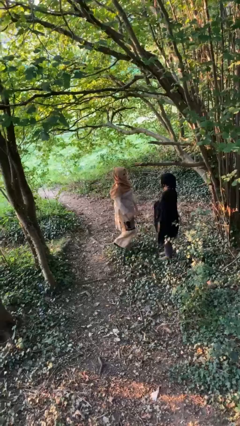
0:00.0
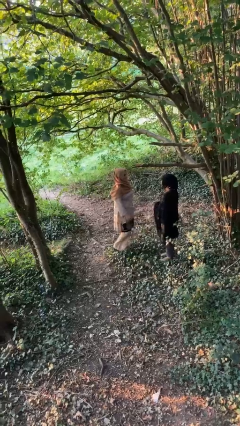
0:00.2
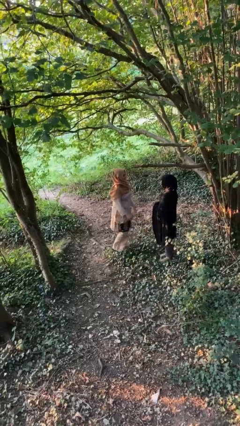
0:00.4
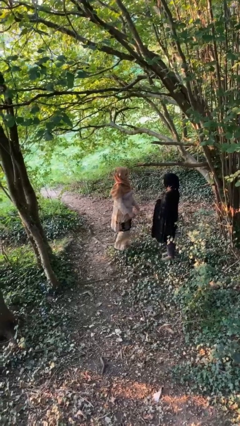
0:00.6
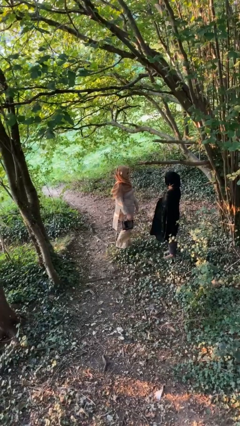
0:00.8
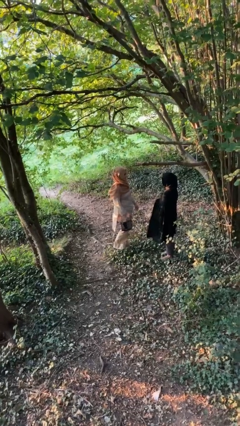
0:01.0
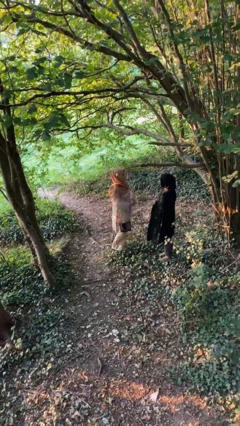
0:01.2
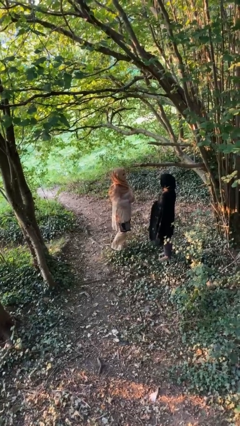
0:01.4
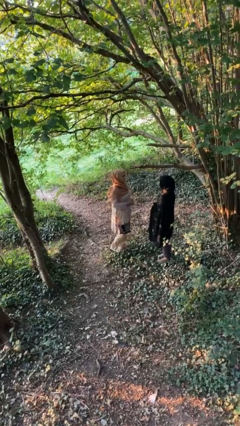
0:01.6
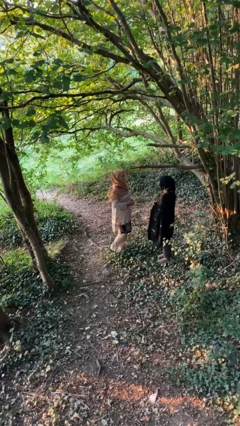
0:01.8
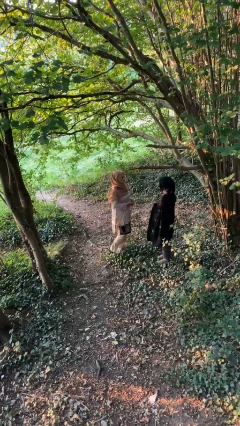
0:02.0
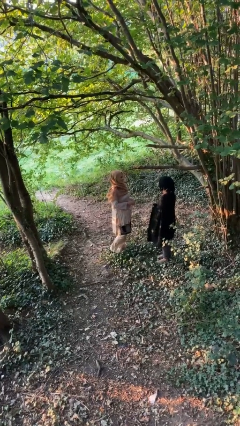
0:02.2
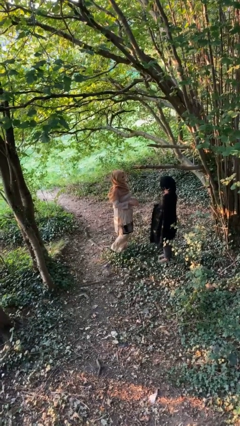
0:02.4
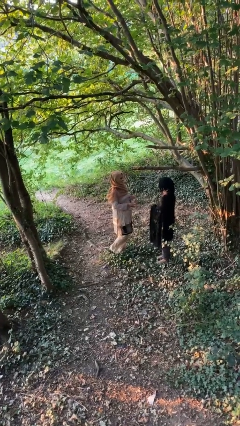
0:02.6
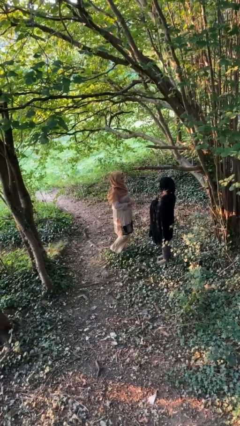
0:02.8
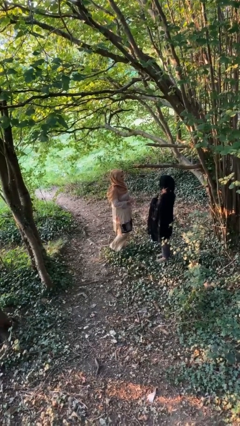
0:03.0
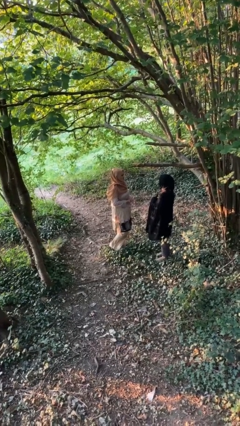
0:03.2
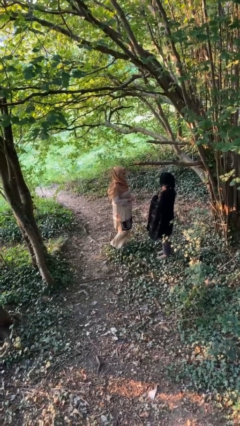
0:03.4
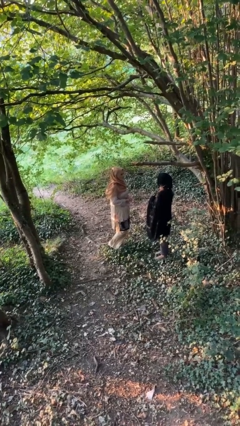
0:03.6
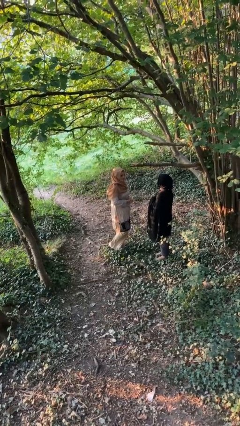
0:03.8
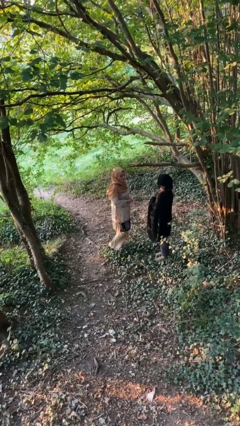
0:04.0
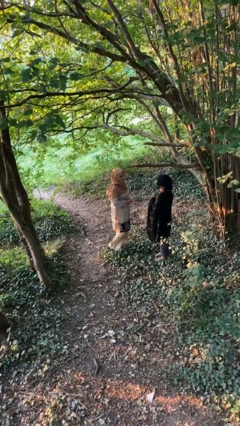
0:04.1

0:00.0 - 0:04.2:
person talks to person

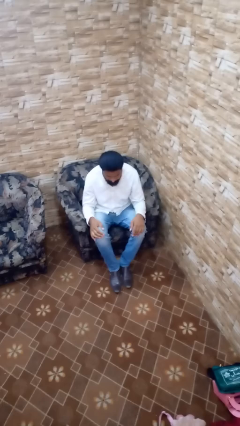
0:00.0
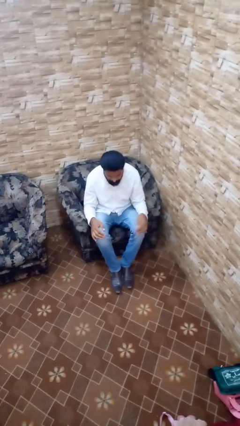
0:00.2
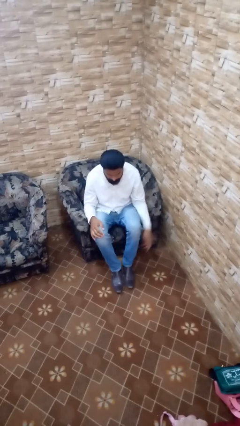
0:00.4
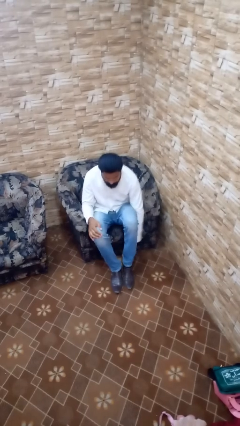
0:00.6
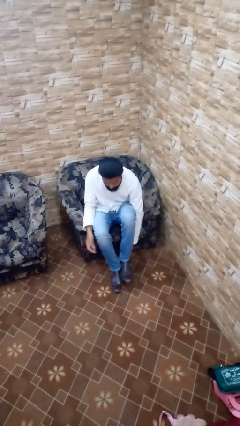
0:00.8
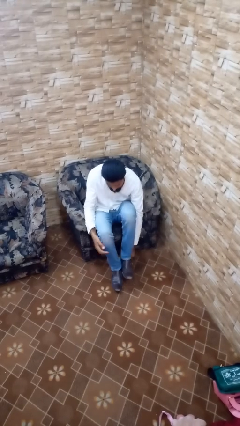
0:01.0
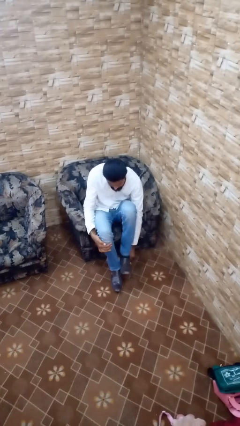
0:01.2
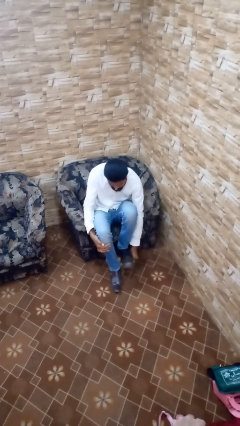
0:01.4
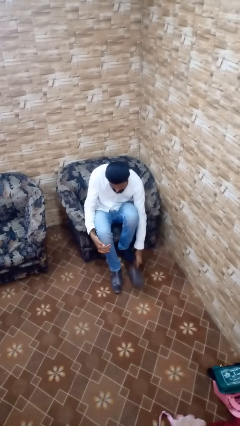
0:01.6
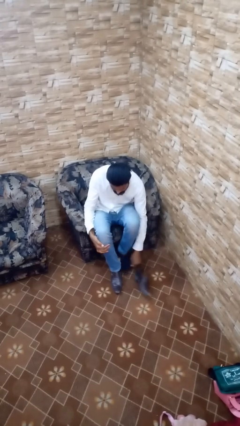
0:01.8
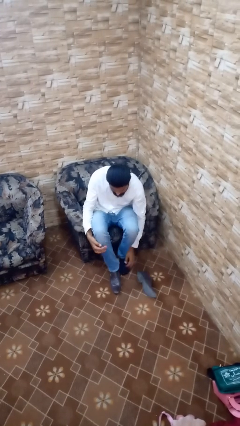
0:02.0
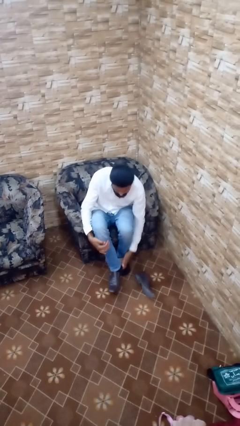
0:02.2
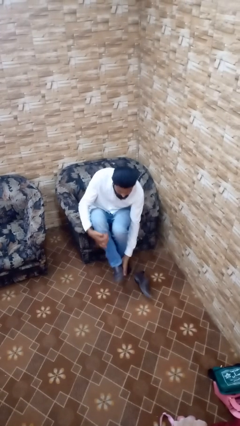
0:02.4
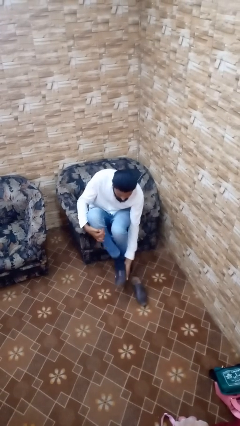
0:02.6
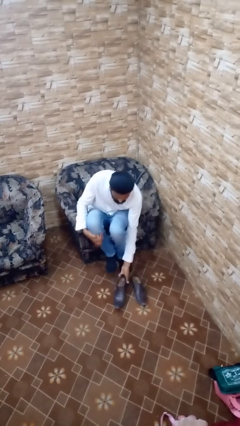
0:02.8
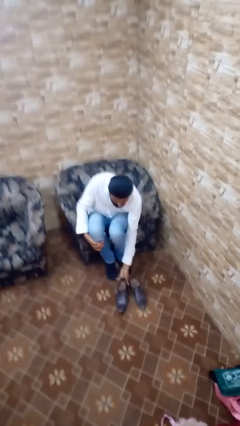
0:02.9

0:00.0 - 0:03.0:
person takes off shoes

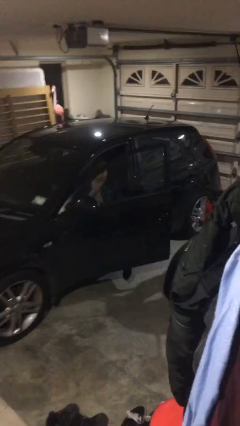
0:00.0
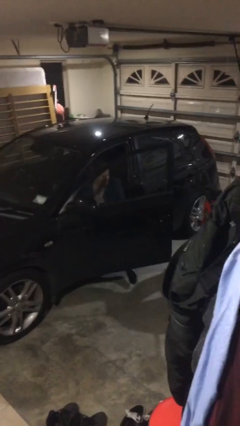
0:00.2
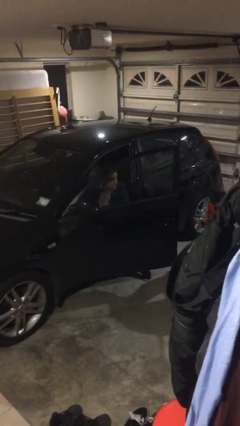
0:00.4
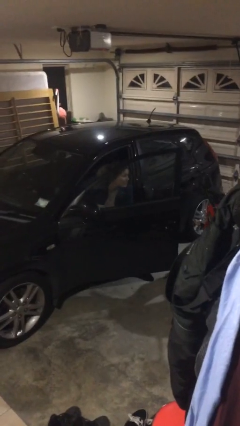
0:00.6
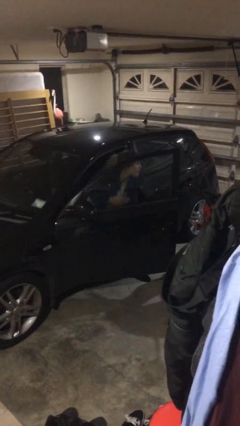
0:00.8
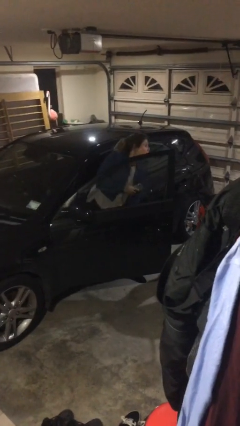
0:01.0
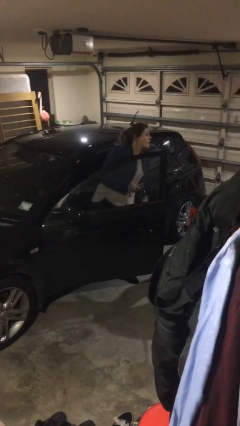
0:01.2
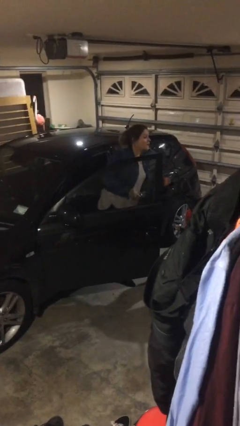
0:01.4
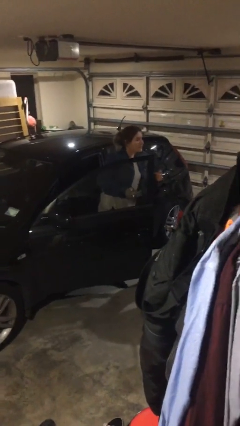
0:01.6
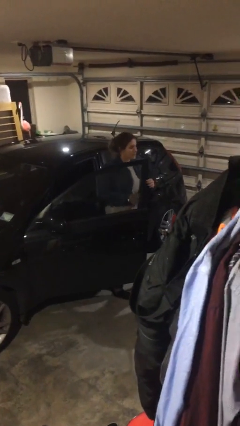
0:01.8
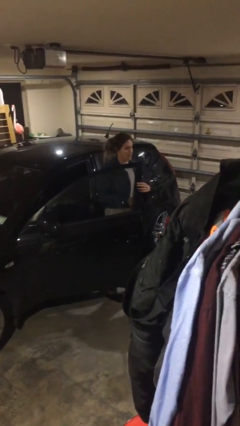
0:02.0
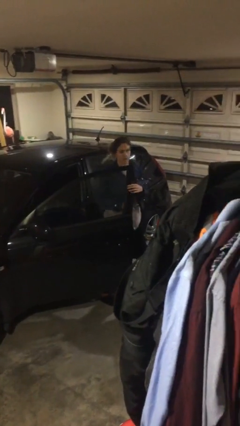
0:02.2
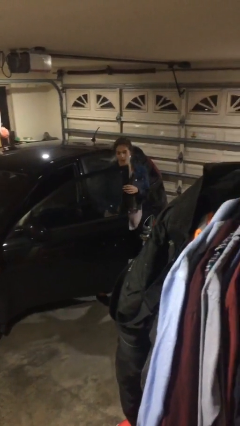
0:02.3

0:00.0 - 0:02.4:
person exits car

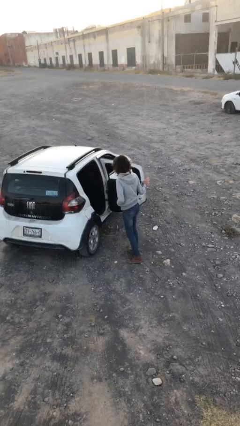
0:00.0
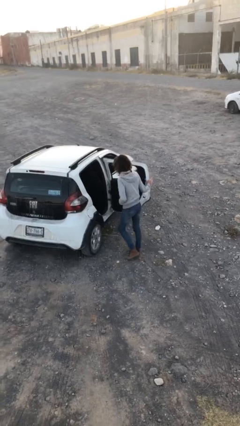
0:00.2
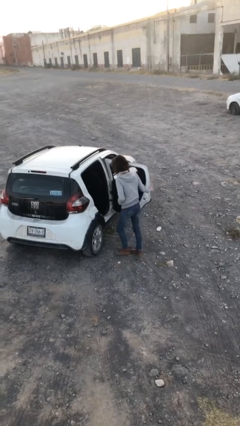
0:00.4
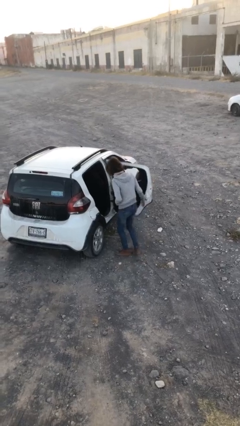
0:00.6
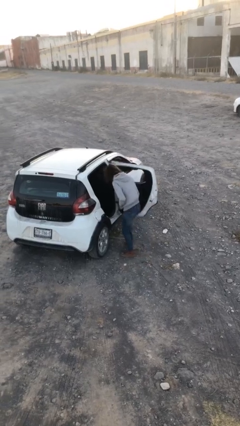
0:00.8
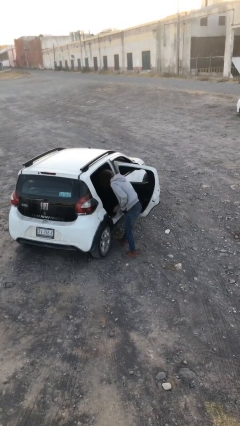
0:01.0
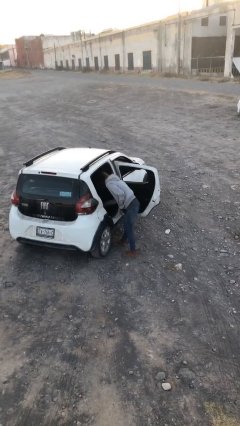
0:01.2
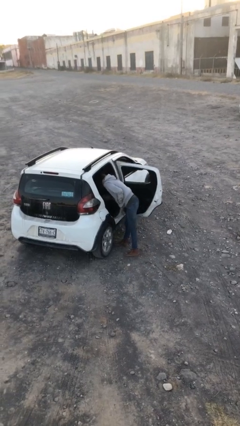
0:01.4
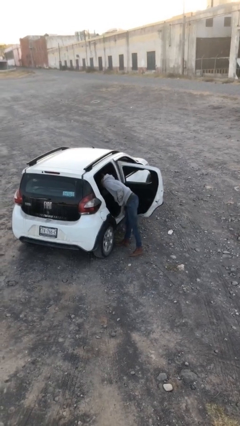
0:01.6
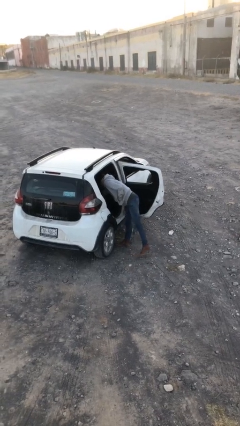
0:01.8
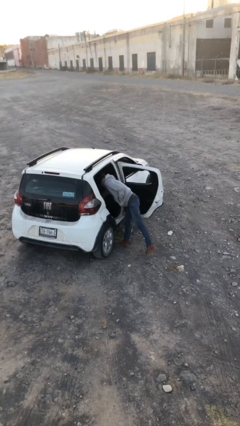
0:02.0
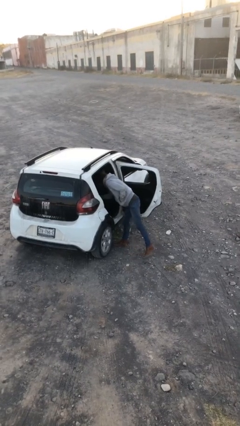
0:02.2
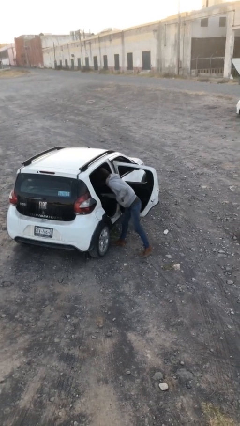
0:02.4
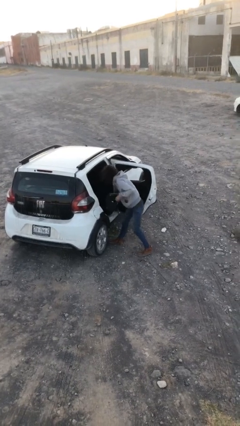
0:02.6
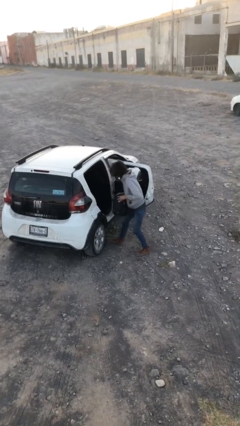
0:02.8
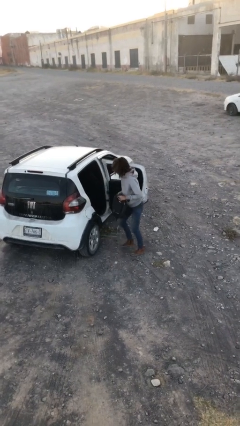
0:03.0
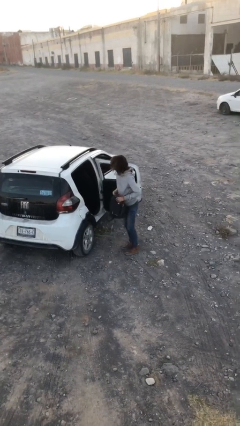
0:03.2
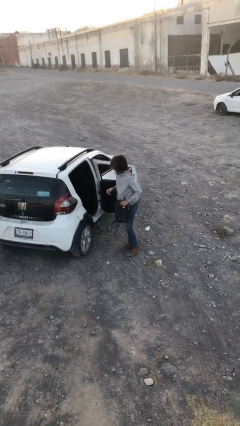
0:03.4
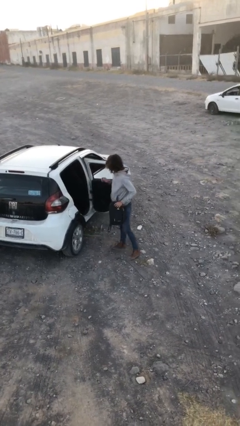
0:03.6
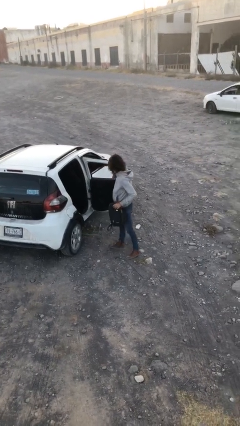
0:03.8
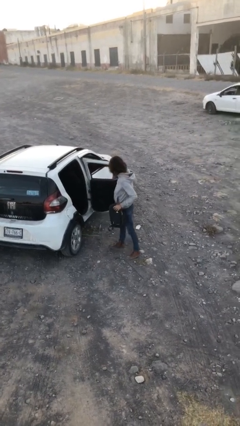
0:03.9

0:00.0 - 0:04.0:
person unloads car

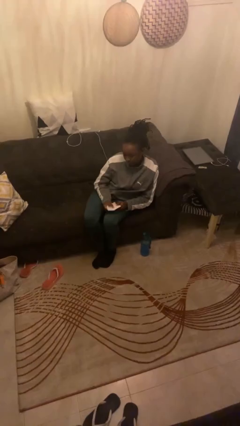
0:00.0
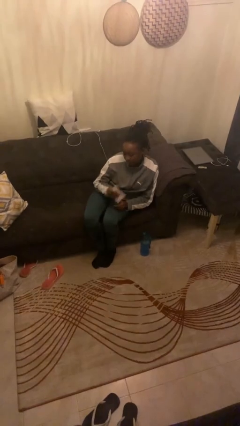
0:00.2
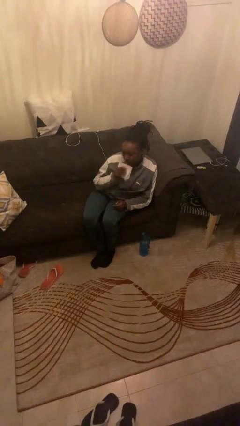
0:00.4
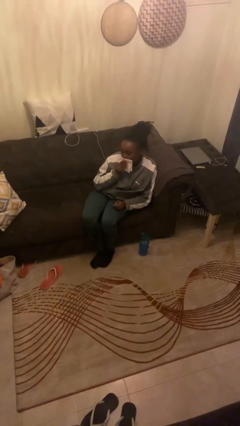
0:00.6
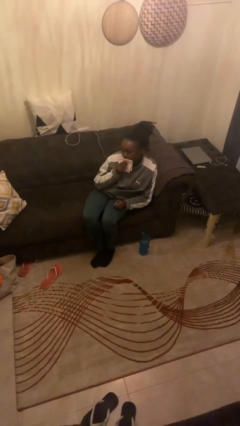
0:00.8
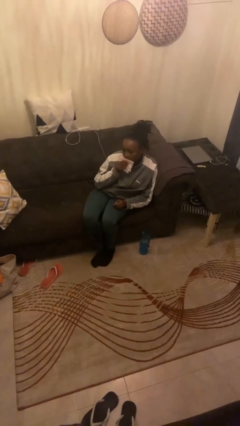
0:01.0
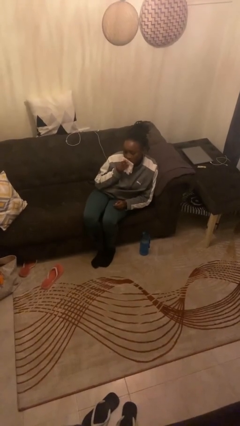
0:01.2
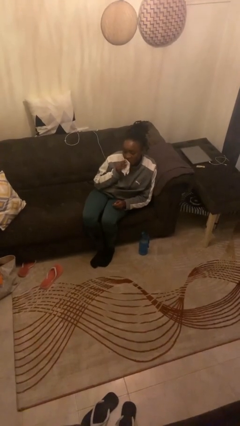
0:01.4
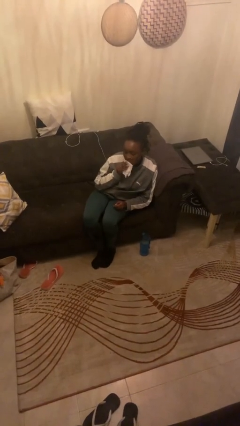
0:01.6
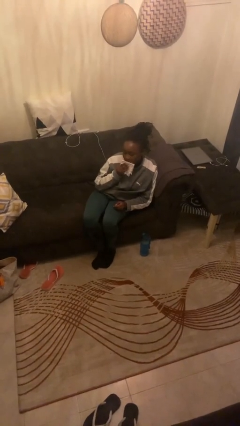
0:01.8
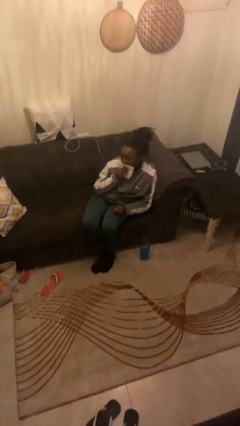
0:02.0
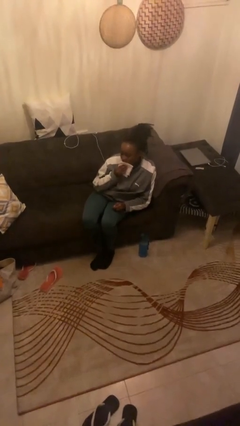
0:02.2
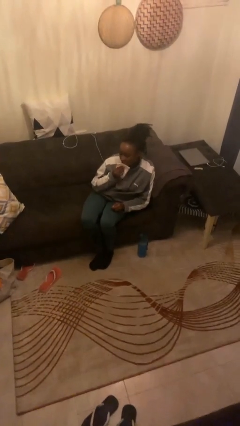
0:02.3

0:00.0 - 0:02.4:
person wipes mouth with napkin

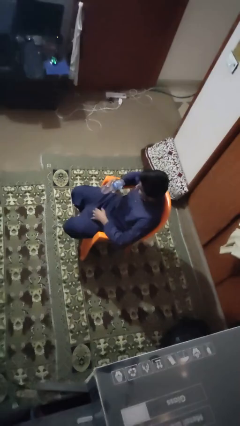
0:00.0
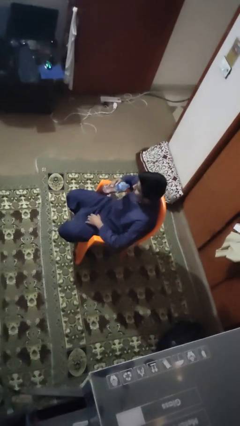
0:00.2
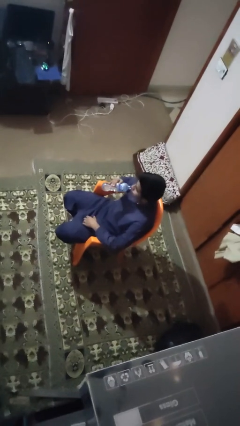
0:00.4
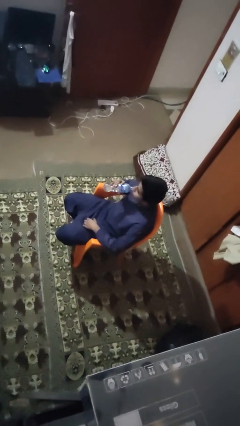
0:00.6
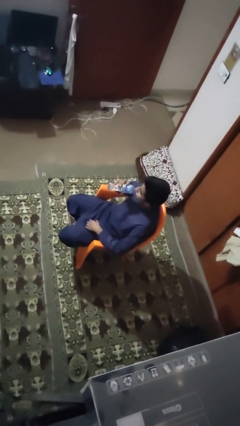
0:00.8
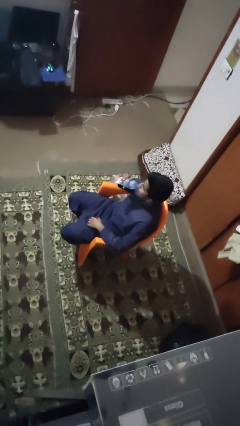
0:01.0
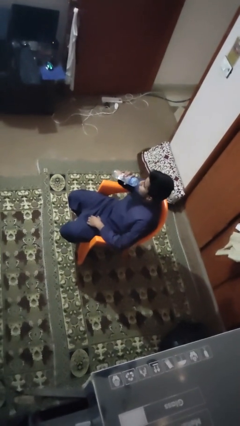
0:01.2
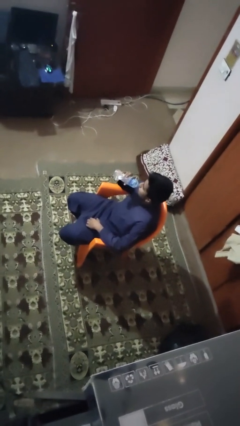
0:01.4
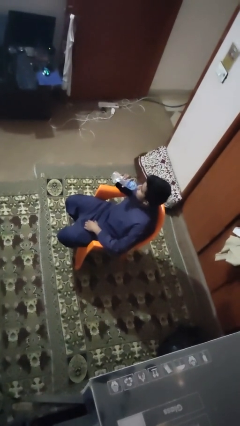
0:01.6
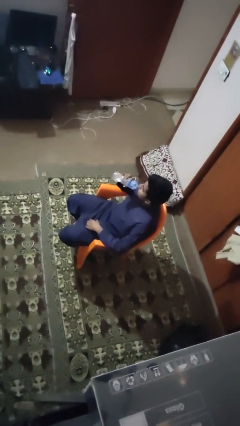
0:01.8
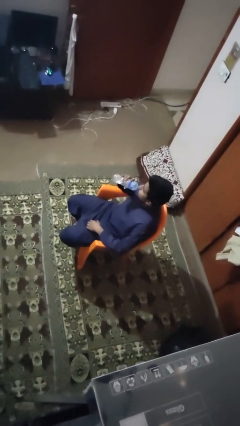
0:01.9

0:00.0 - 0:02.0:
person drinks from bottle
